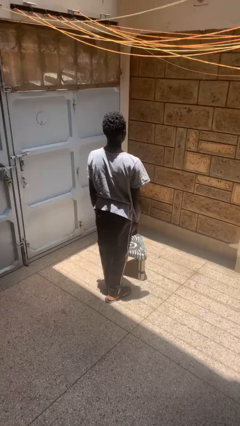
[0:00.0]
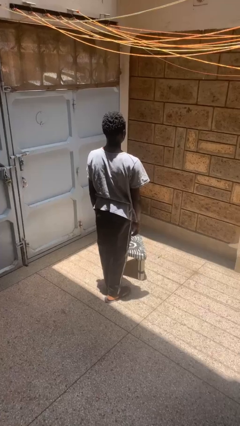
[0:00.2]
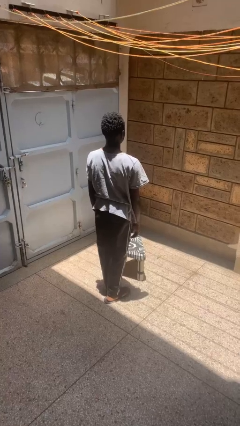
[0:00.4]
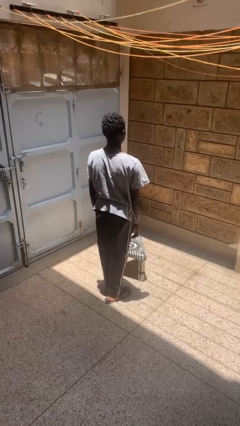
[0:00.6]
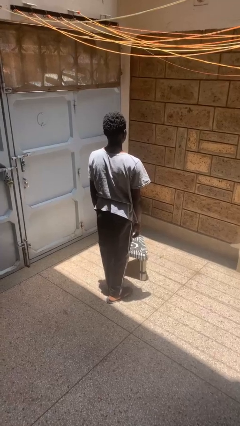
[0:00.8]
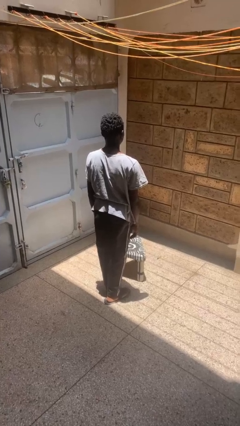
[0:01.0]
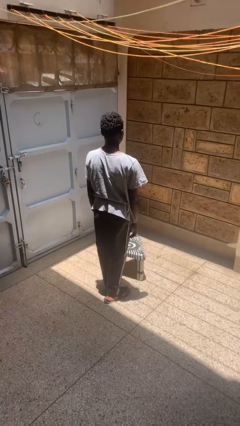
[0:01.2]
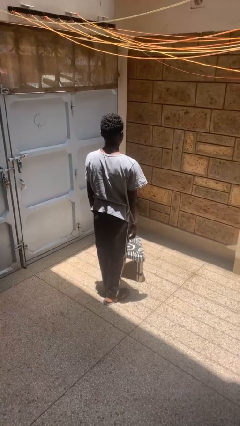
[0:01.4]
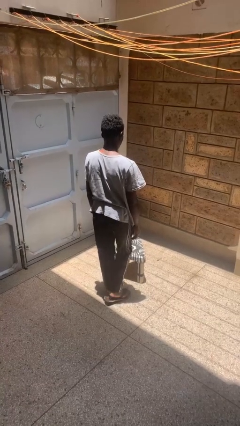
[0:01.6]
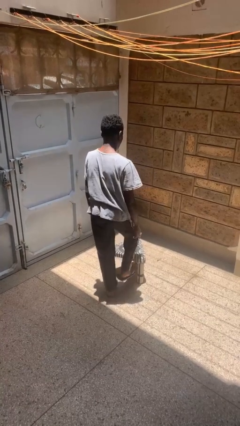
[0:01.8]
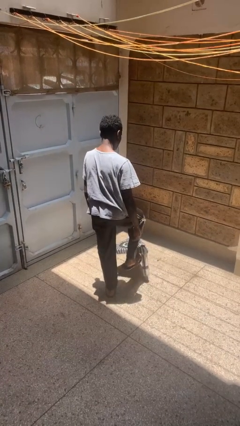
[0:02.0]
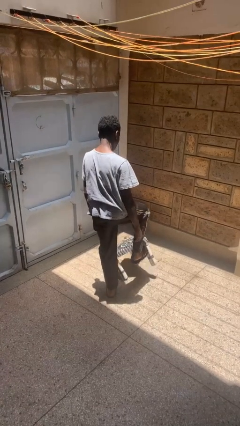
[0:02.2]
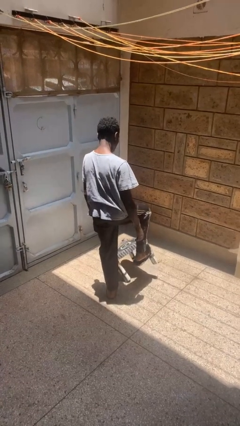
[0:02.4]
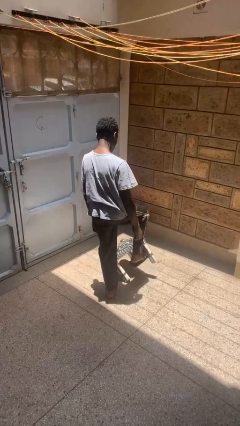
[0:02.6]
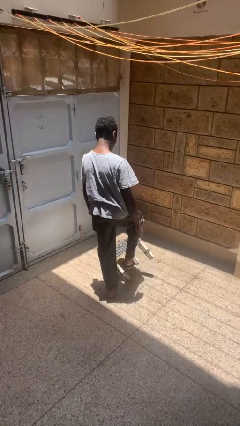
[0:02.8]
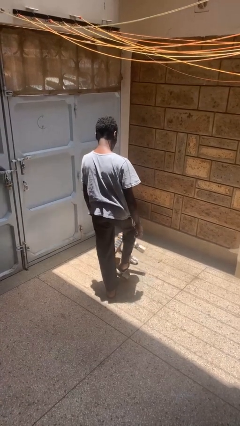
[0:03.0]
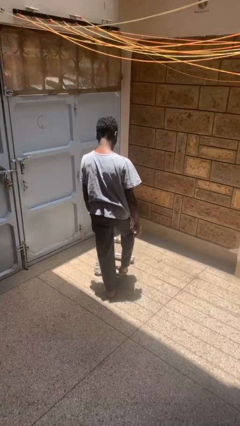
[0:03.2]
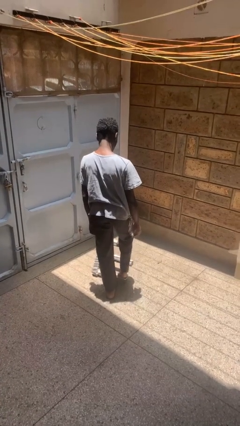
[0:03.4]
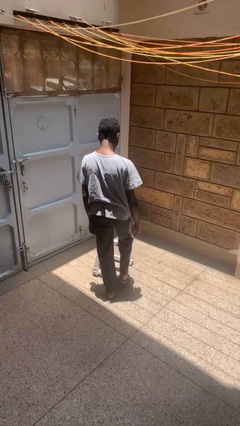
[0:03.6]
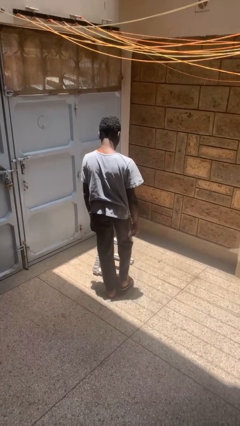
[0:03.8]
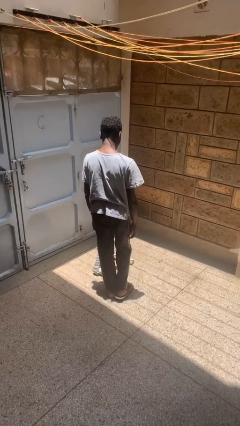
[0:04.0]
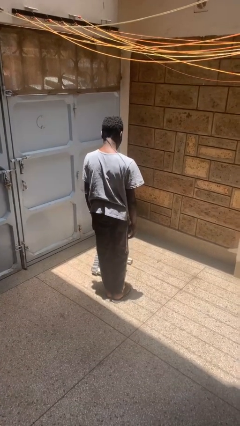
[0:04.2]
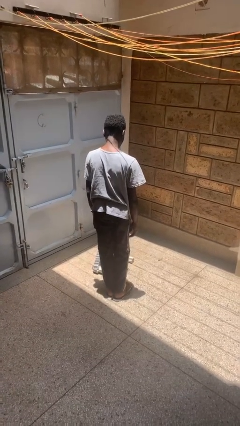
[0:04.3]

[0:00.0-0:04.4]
person knocks over furniture

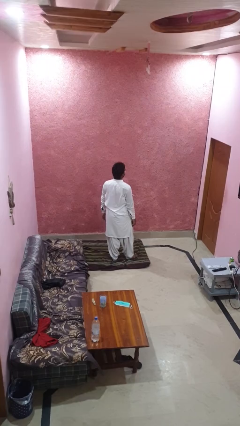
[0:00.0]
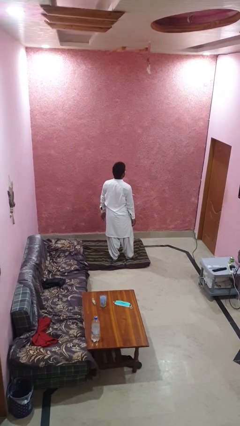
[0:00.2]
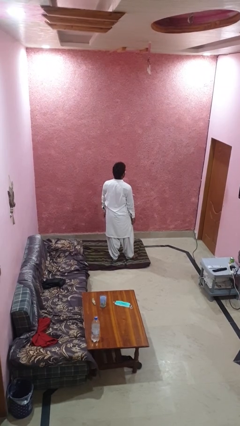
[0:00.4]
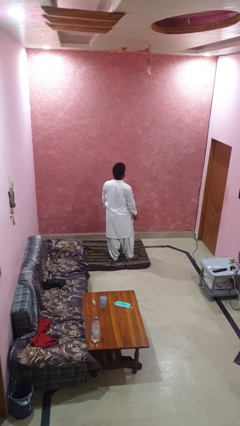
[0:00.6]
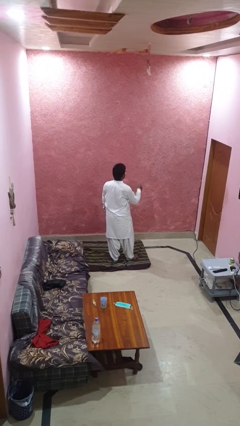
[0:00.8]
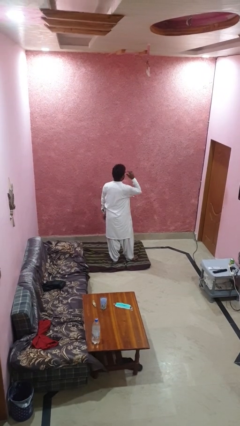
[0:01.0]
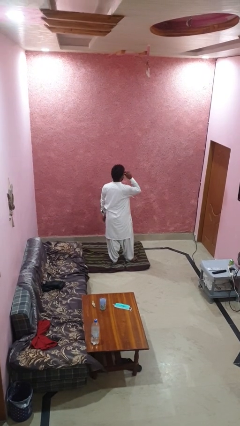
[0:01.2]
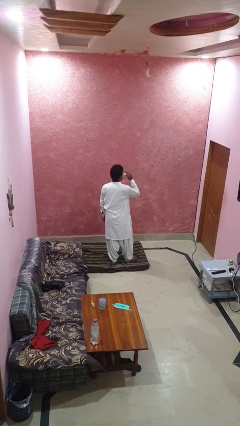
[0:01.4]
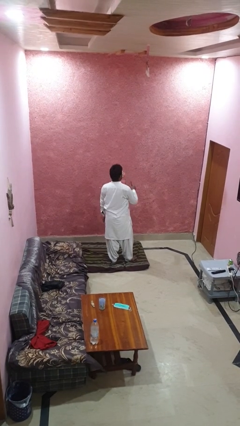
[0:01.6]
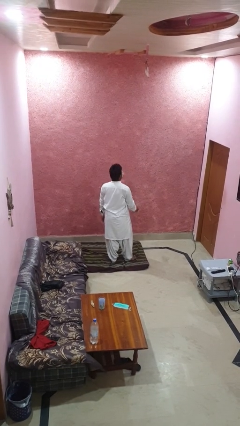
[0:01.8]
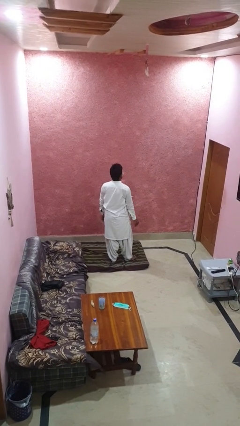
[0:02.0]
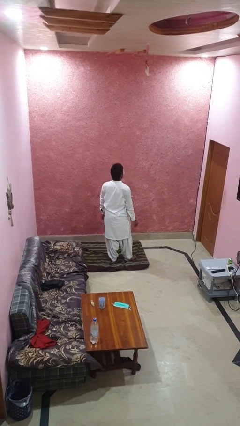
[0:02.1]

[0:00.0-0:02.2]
person takes off glasses

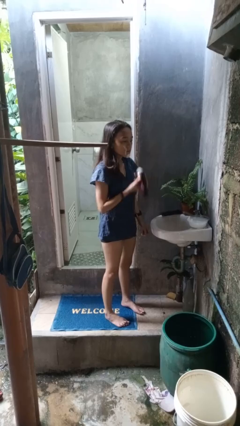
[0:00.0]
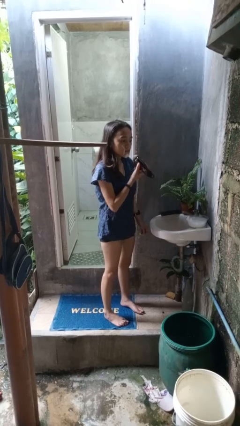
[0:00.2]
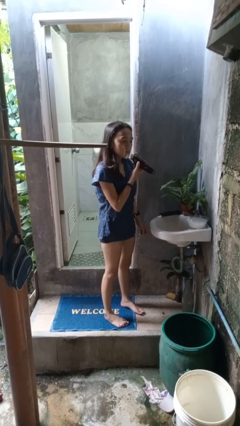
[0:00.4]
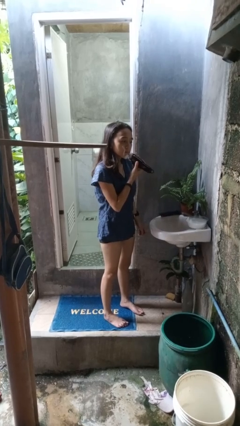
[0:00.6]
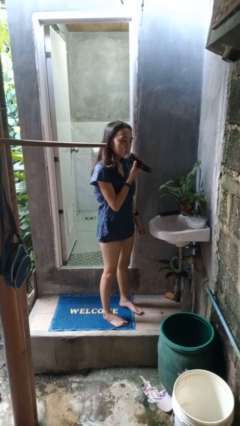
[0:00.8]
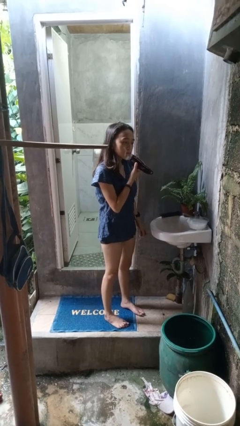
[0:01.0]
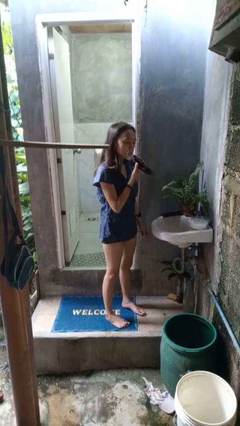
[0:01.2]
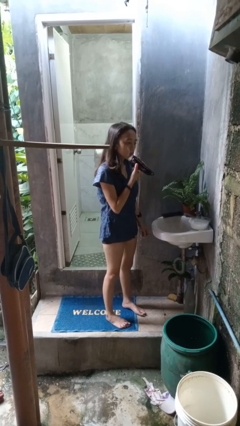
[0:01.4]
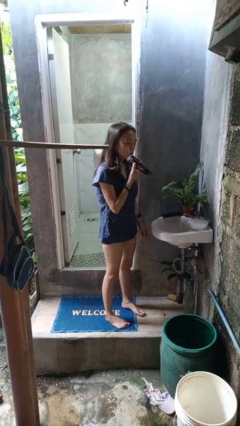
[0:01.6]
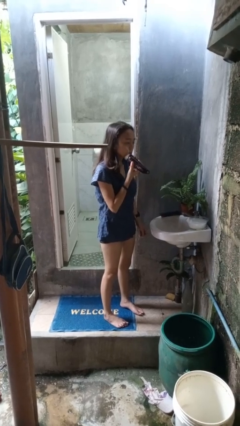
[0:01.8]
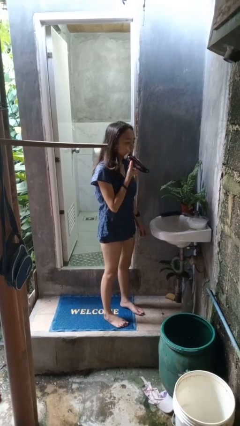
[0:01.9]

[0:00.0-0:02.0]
person shaves face

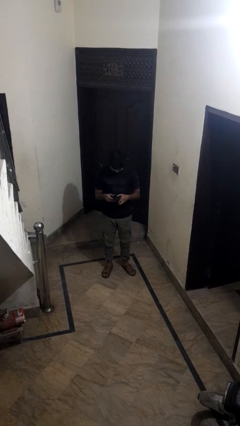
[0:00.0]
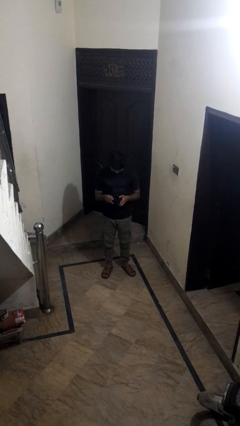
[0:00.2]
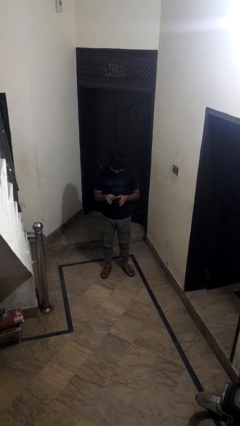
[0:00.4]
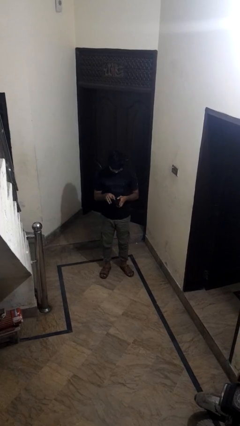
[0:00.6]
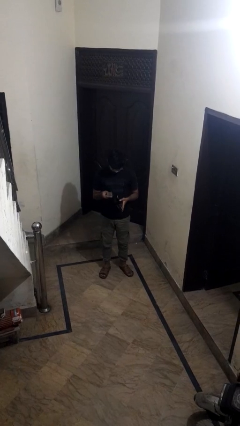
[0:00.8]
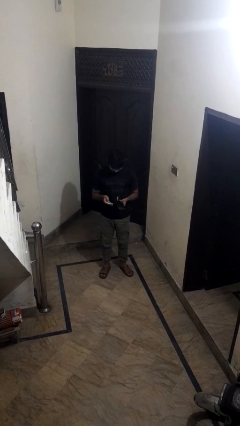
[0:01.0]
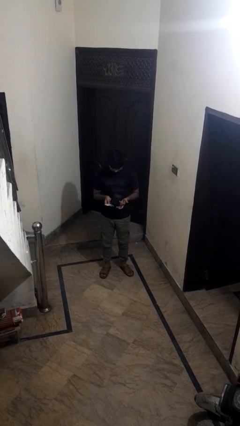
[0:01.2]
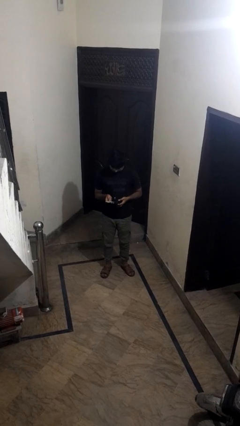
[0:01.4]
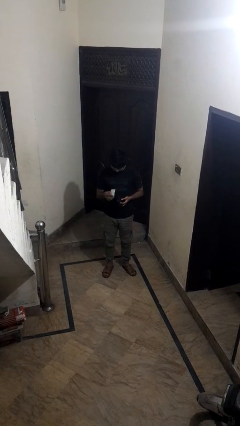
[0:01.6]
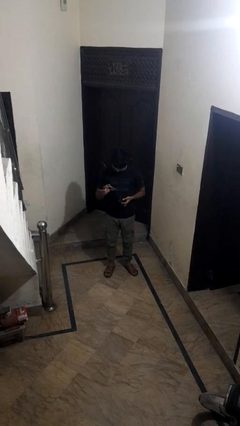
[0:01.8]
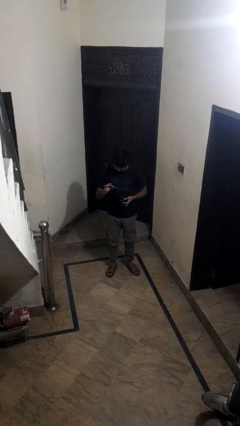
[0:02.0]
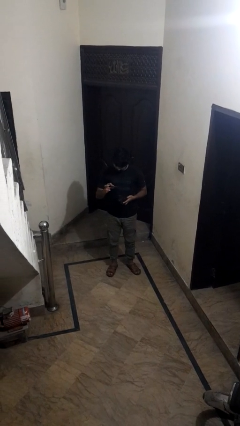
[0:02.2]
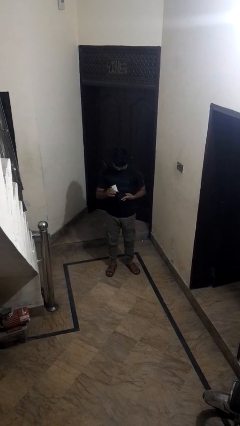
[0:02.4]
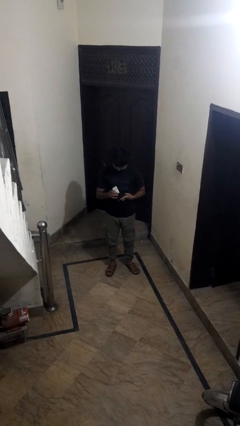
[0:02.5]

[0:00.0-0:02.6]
person takes object from purse

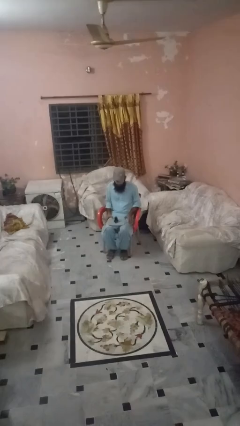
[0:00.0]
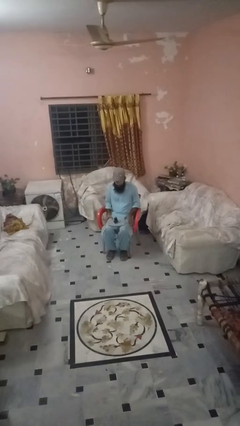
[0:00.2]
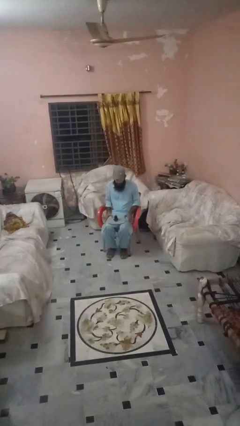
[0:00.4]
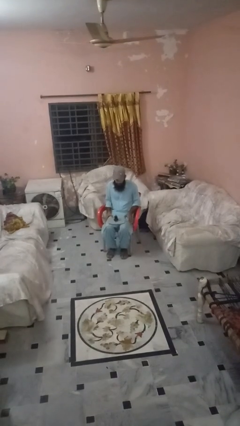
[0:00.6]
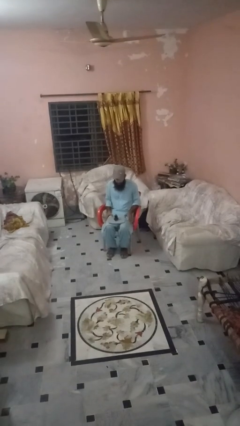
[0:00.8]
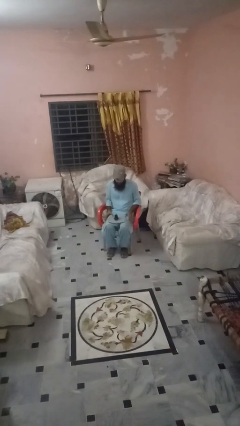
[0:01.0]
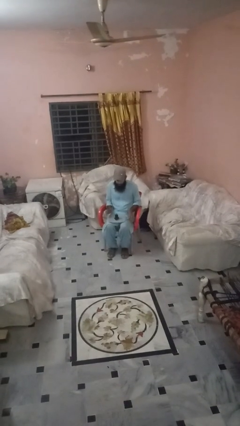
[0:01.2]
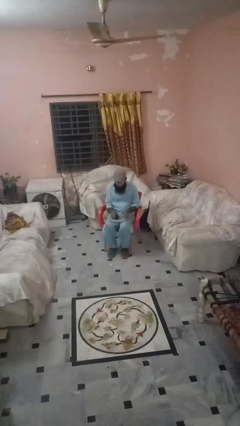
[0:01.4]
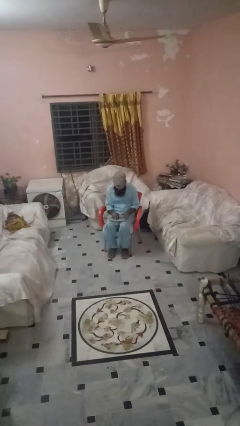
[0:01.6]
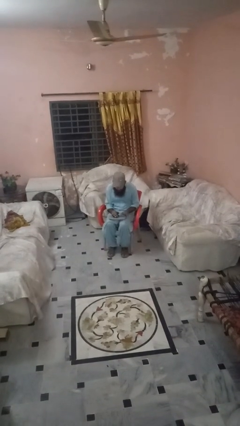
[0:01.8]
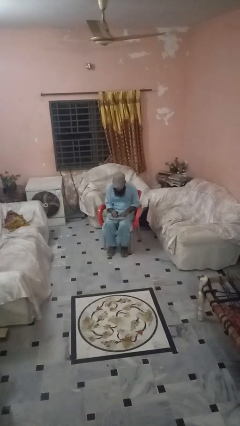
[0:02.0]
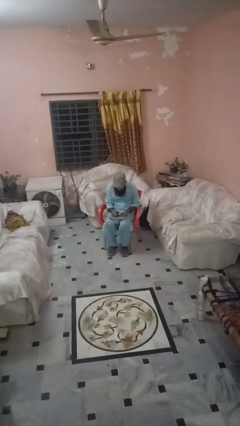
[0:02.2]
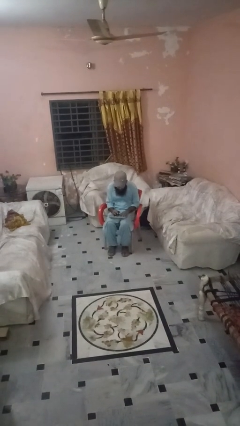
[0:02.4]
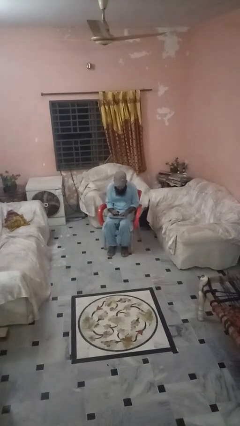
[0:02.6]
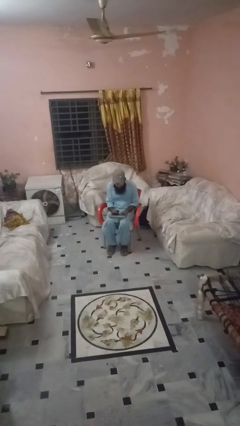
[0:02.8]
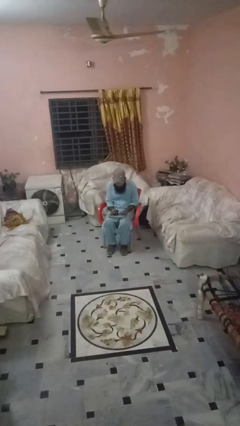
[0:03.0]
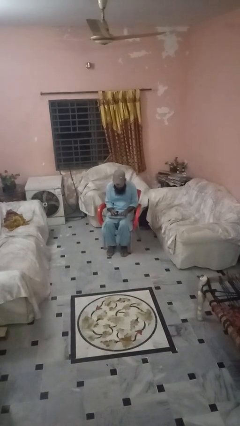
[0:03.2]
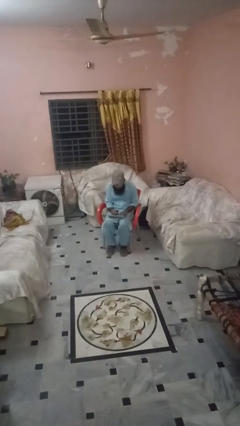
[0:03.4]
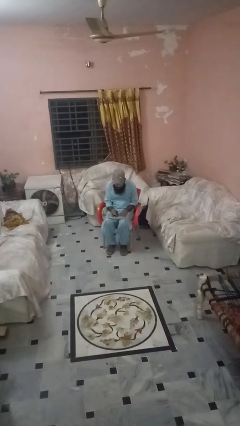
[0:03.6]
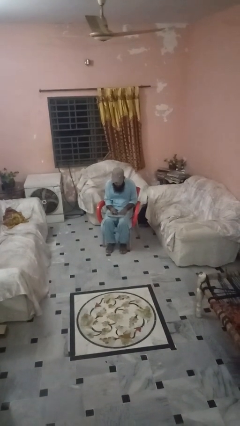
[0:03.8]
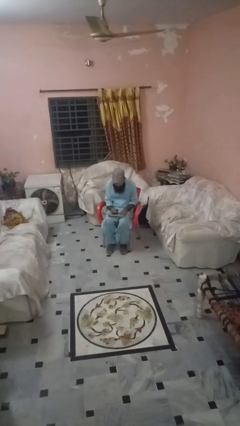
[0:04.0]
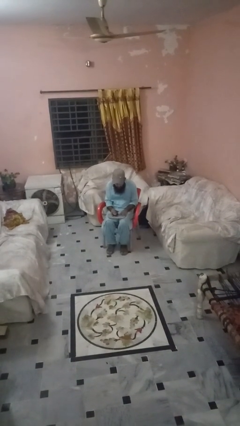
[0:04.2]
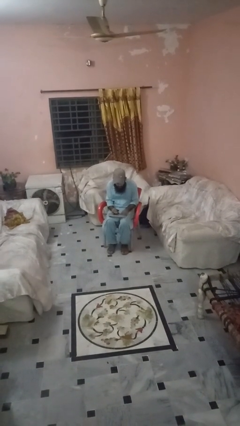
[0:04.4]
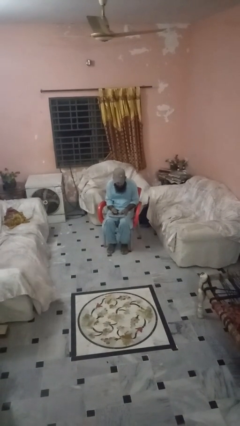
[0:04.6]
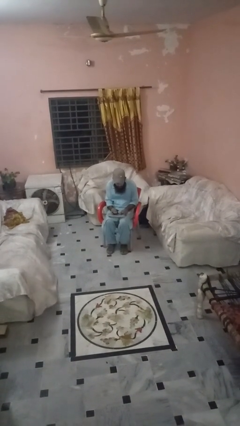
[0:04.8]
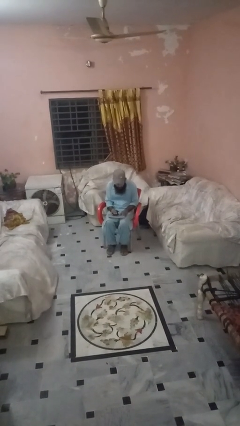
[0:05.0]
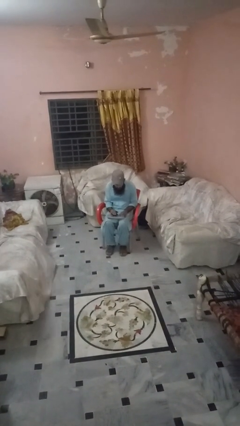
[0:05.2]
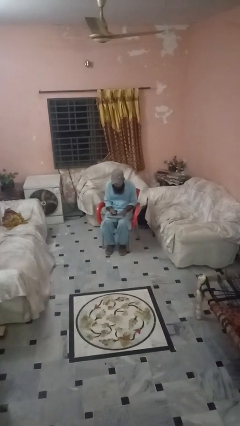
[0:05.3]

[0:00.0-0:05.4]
person interacts with handheld game

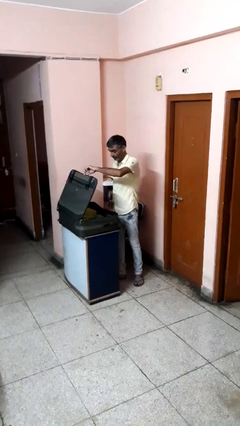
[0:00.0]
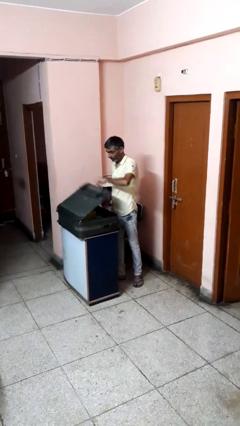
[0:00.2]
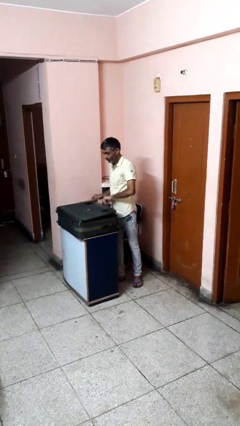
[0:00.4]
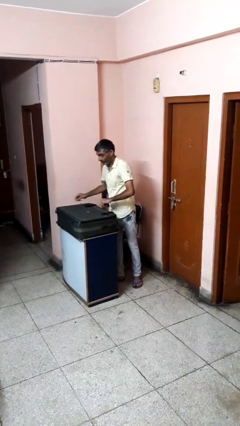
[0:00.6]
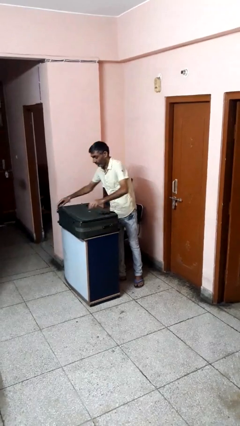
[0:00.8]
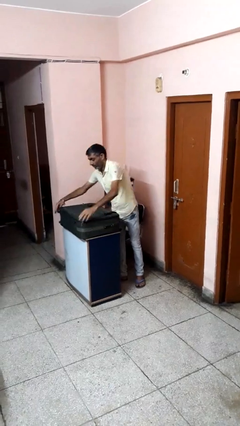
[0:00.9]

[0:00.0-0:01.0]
person closes suitcase
